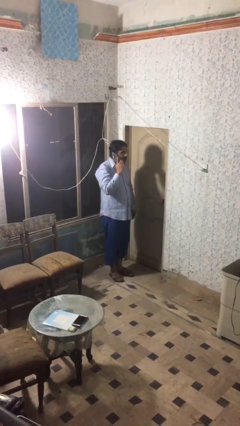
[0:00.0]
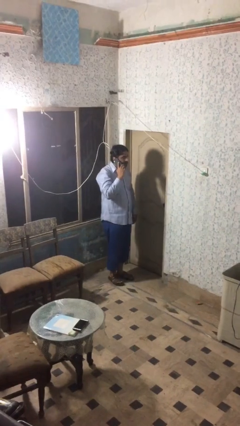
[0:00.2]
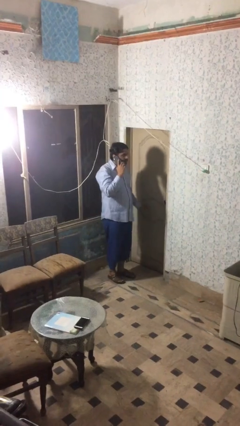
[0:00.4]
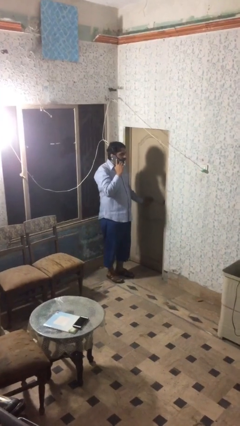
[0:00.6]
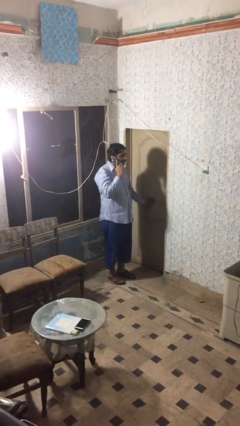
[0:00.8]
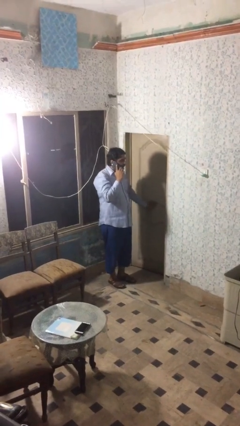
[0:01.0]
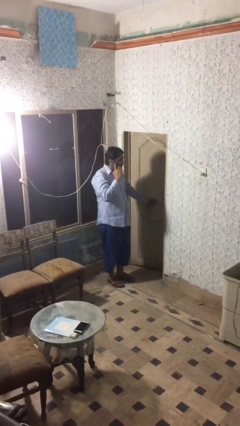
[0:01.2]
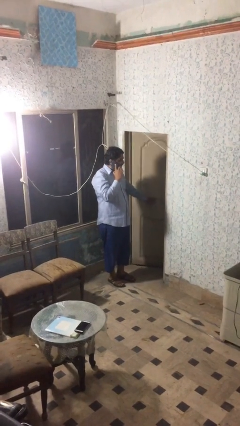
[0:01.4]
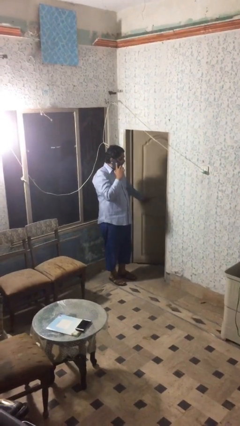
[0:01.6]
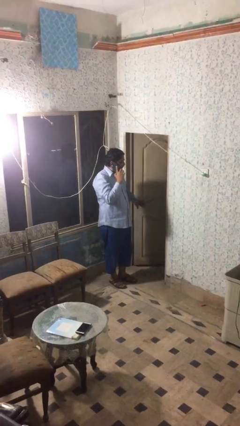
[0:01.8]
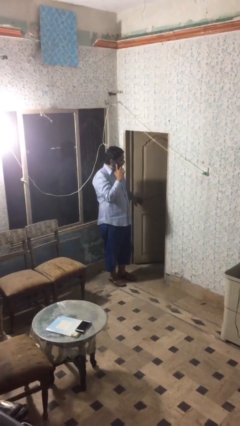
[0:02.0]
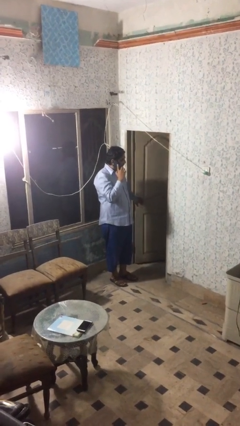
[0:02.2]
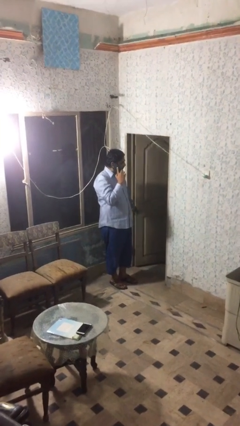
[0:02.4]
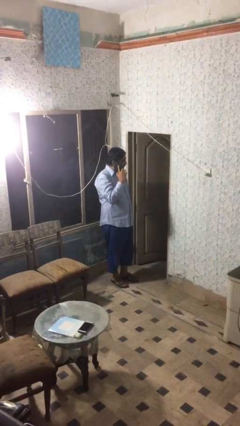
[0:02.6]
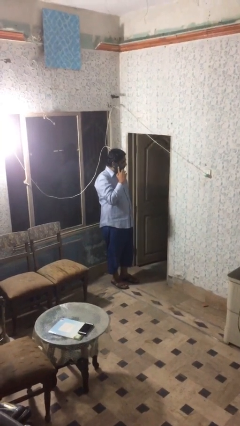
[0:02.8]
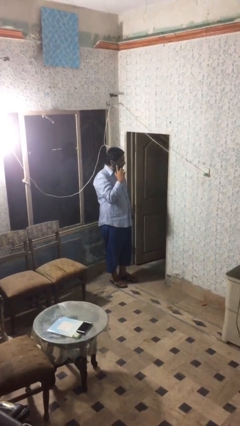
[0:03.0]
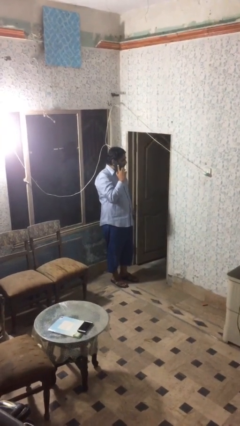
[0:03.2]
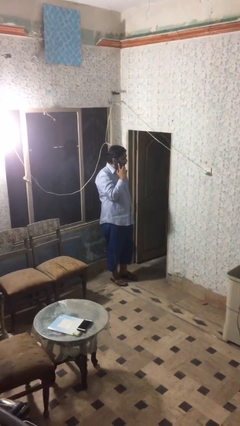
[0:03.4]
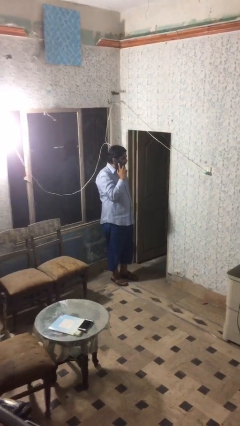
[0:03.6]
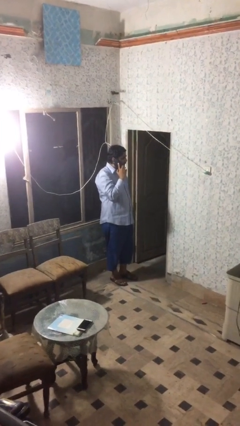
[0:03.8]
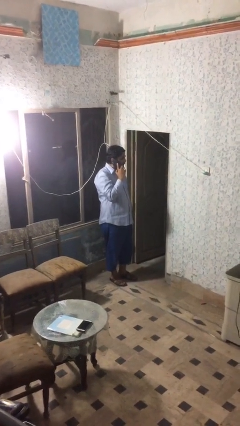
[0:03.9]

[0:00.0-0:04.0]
person opens facility door

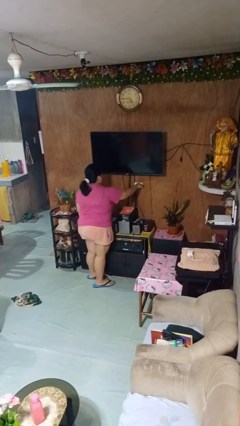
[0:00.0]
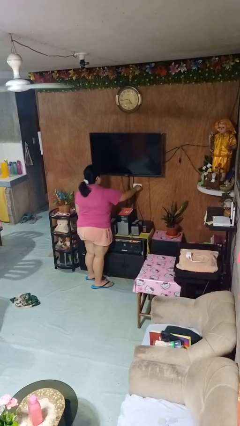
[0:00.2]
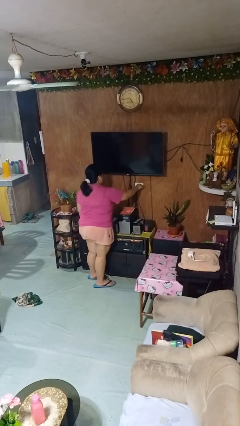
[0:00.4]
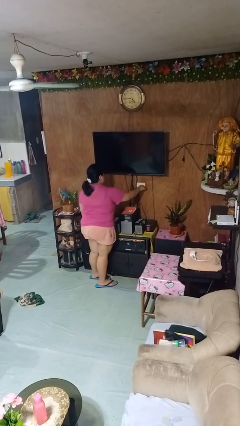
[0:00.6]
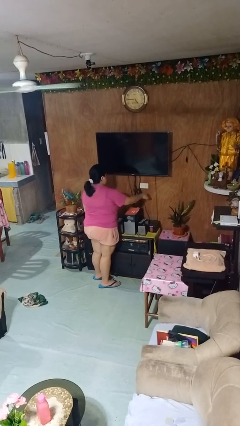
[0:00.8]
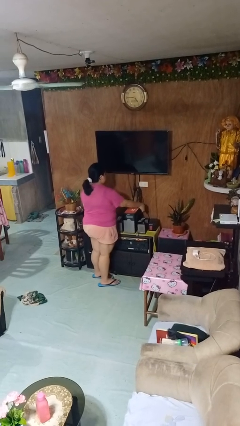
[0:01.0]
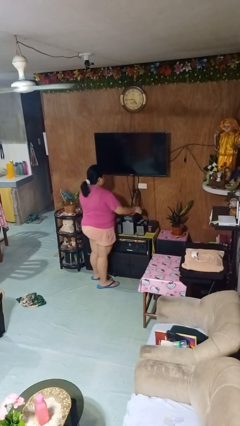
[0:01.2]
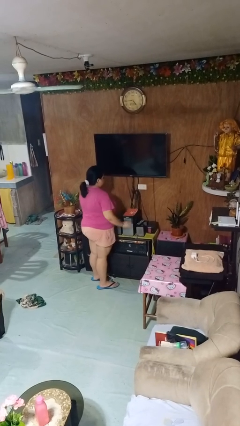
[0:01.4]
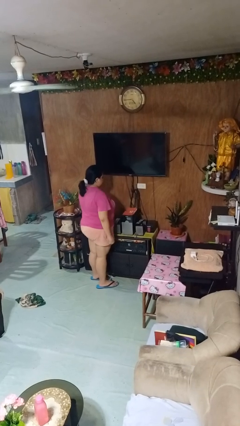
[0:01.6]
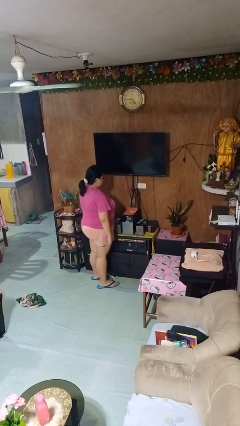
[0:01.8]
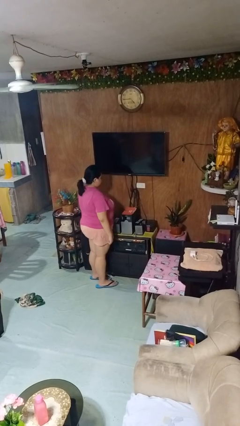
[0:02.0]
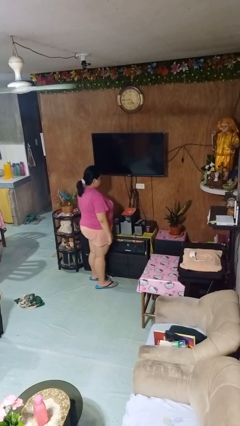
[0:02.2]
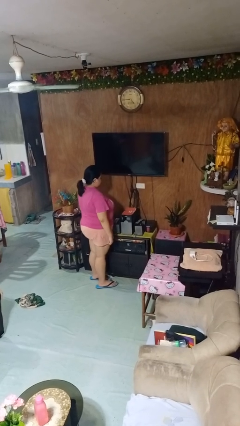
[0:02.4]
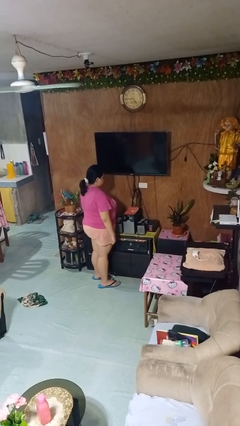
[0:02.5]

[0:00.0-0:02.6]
person unplugs from electrical socket

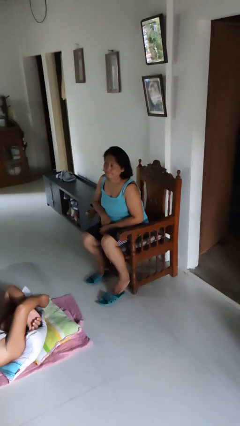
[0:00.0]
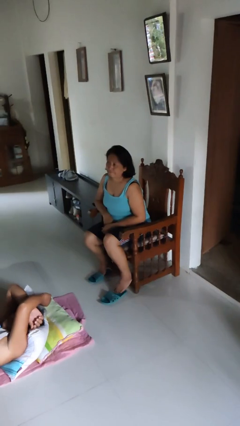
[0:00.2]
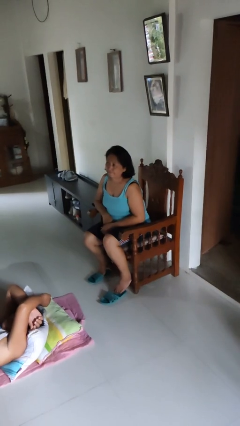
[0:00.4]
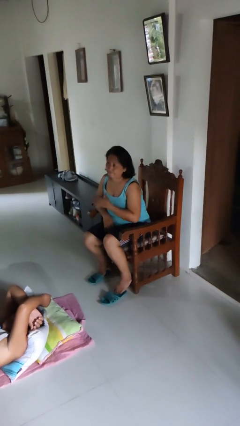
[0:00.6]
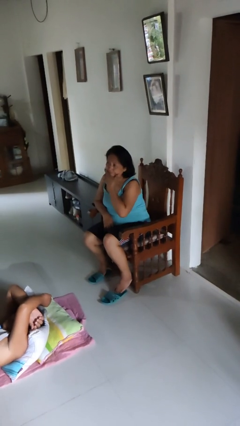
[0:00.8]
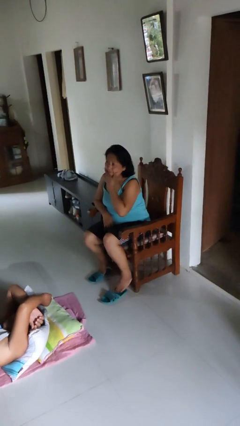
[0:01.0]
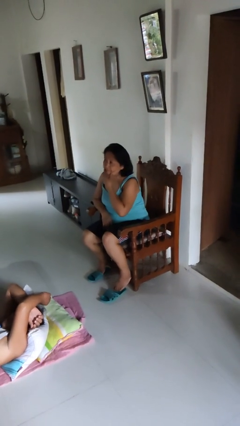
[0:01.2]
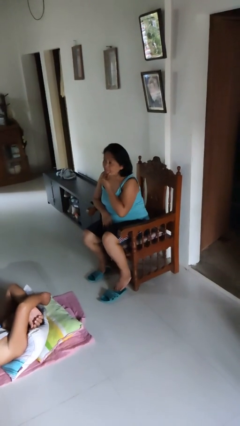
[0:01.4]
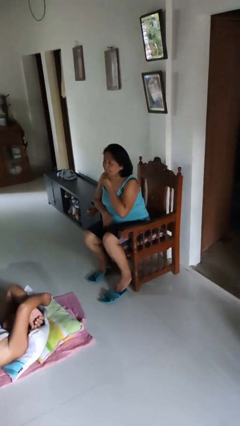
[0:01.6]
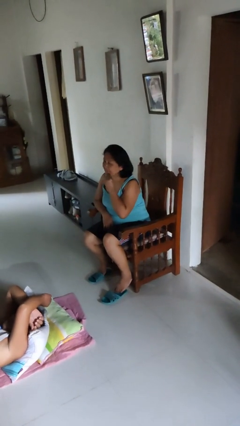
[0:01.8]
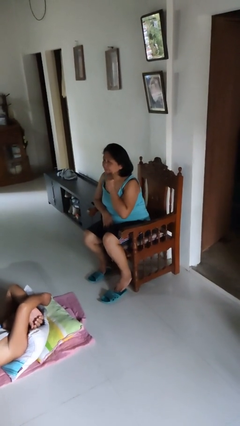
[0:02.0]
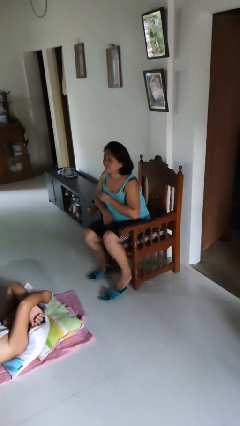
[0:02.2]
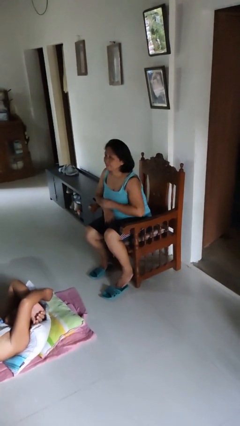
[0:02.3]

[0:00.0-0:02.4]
person strokes chin

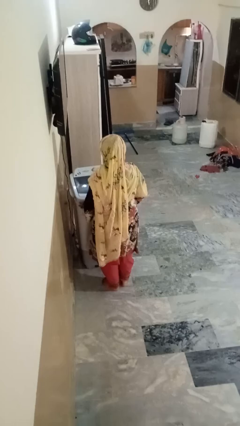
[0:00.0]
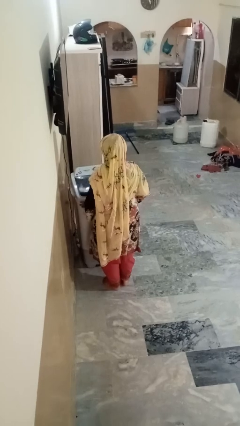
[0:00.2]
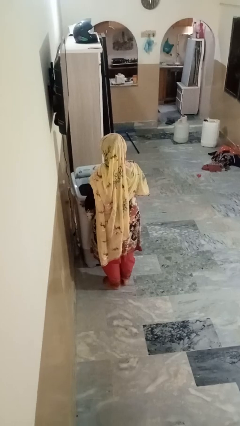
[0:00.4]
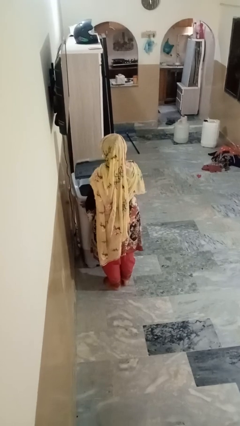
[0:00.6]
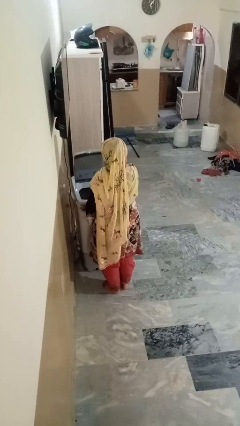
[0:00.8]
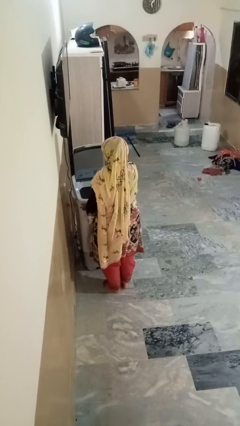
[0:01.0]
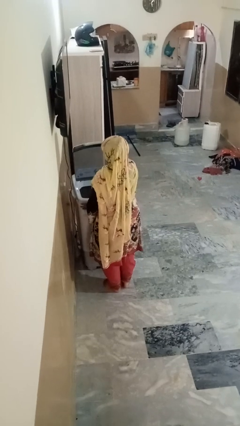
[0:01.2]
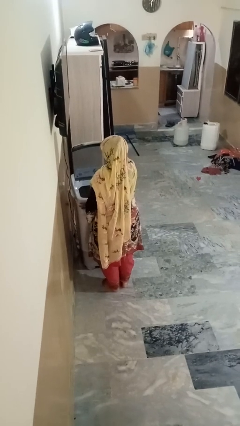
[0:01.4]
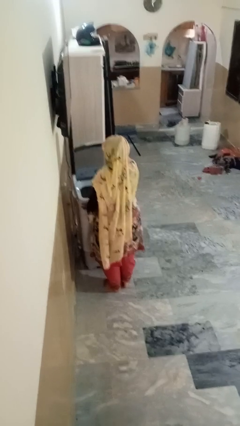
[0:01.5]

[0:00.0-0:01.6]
person opens clothes washer

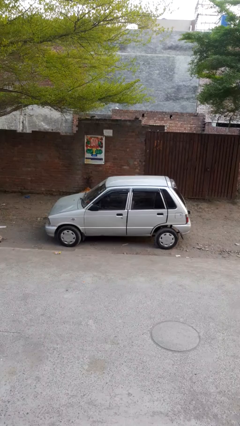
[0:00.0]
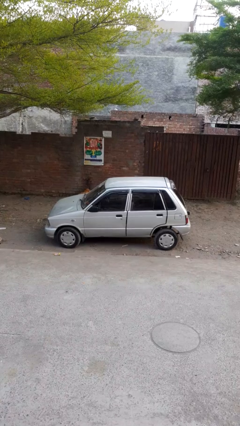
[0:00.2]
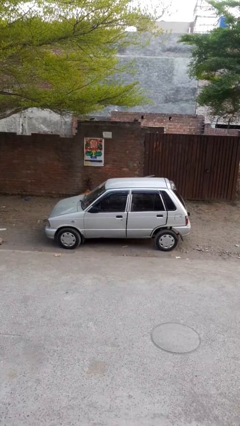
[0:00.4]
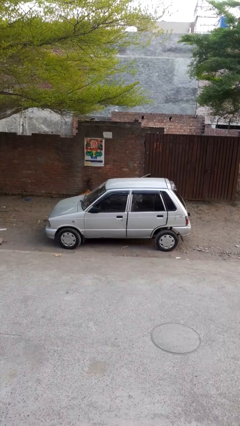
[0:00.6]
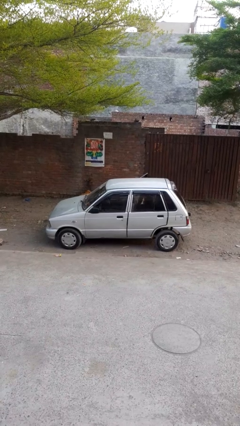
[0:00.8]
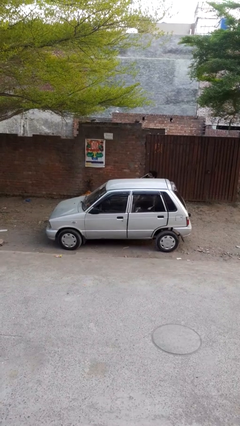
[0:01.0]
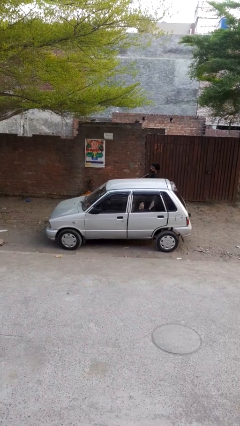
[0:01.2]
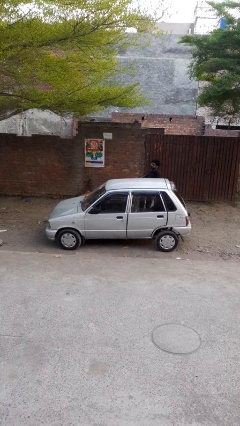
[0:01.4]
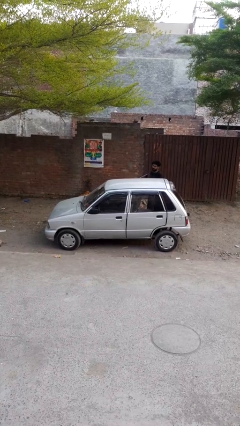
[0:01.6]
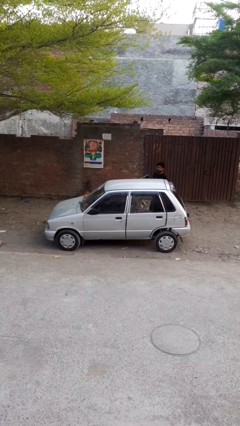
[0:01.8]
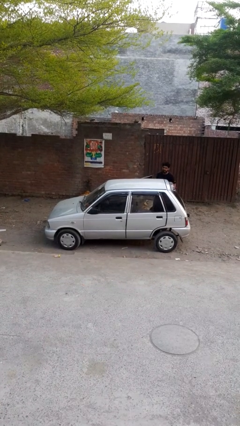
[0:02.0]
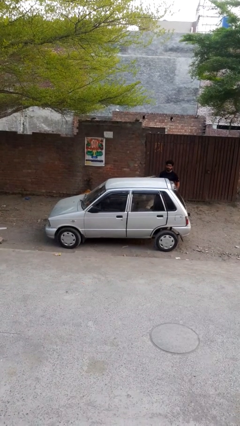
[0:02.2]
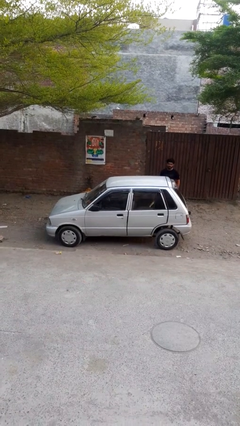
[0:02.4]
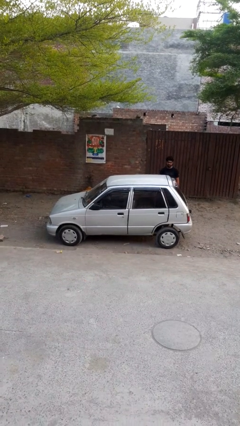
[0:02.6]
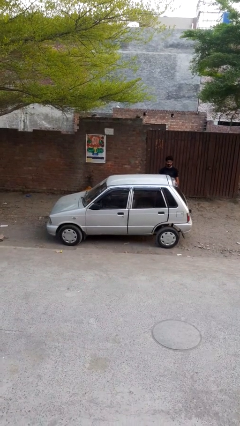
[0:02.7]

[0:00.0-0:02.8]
car drops off person

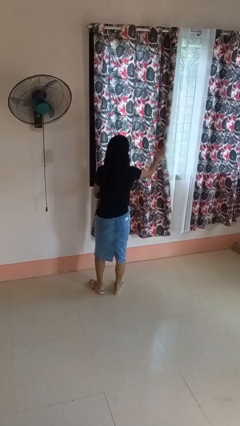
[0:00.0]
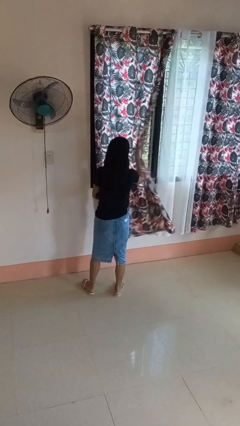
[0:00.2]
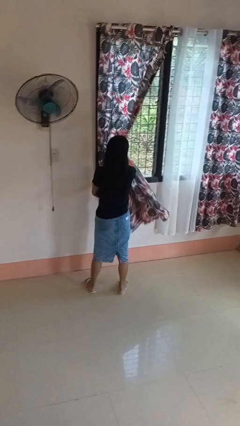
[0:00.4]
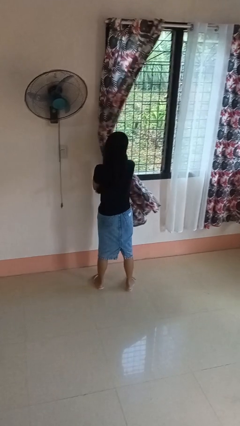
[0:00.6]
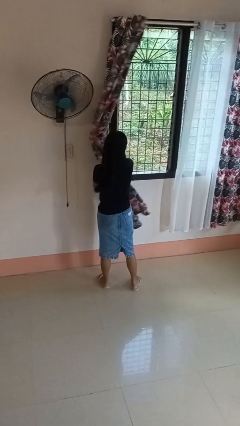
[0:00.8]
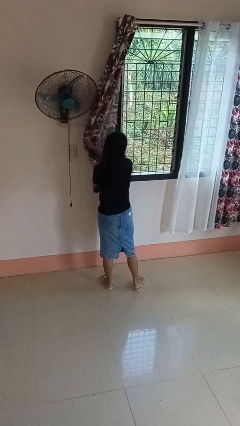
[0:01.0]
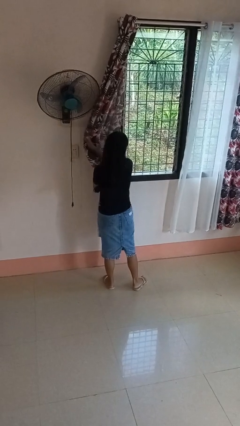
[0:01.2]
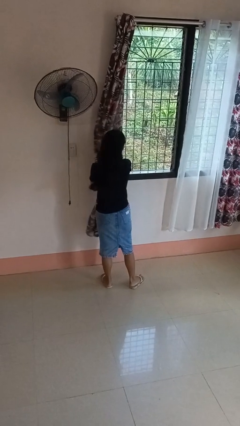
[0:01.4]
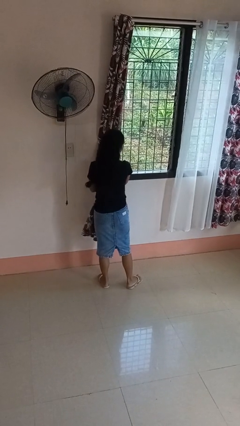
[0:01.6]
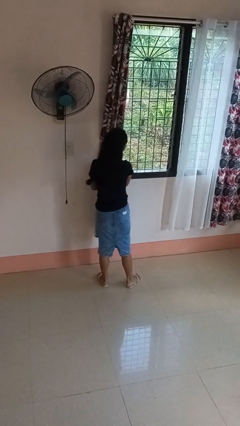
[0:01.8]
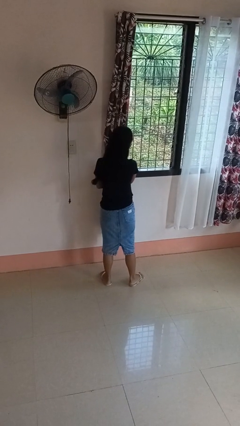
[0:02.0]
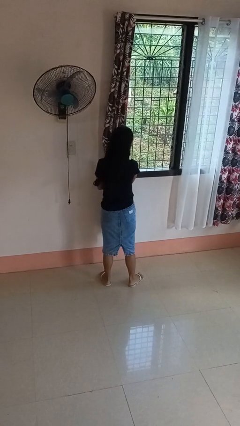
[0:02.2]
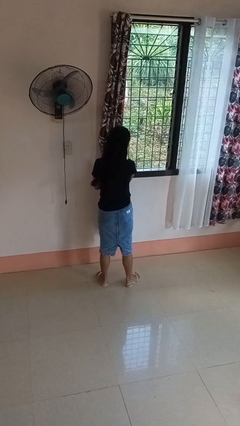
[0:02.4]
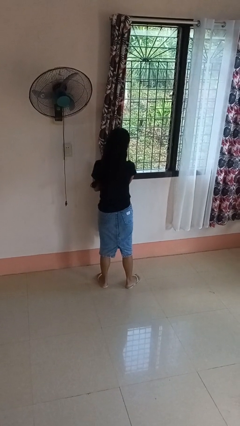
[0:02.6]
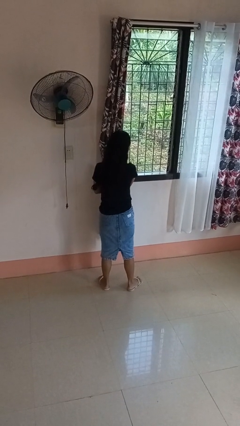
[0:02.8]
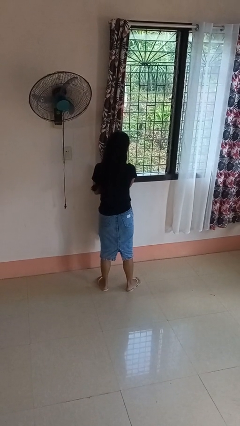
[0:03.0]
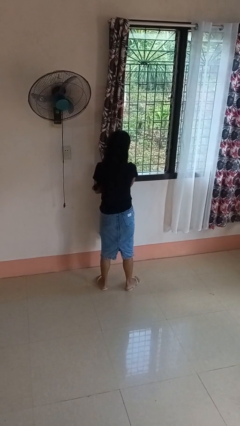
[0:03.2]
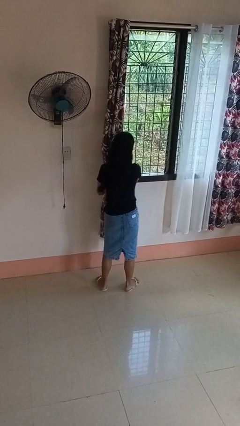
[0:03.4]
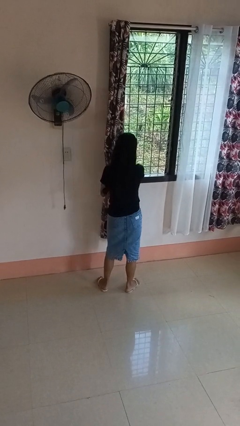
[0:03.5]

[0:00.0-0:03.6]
person opens curtains

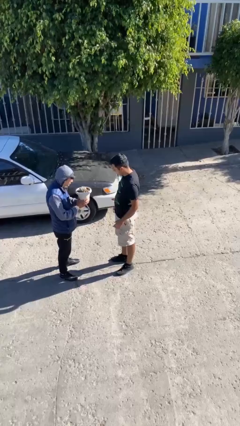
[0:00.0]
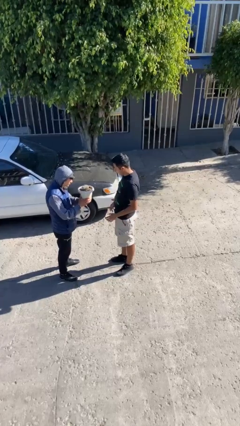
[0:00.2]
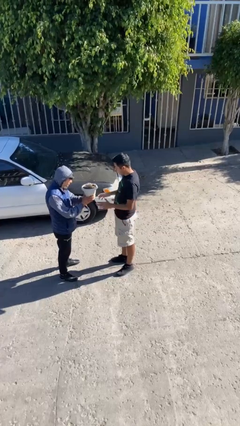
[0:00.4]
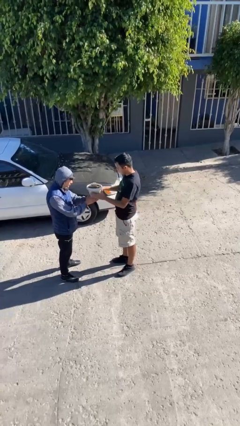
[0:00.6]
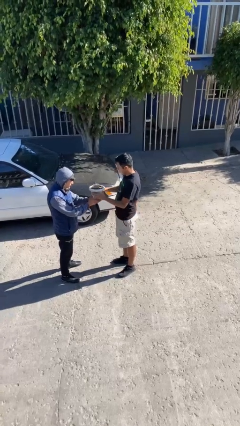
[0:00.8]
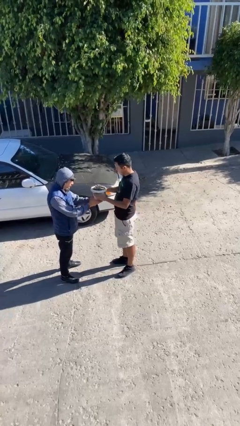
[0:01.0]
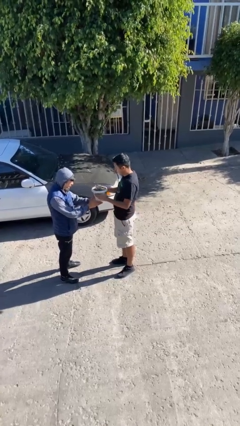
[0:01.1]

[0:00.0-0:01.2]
person transfers object to person
